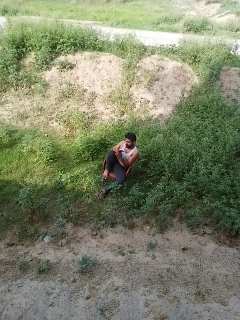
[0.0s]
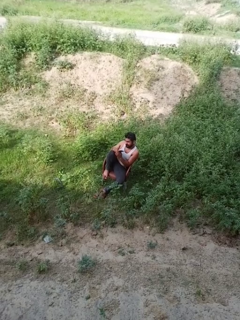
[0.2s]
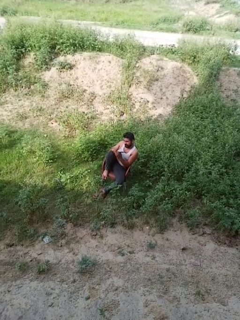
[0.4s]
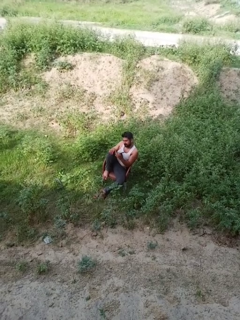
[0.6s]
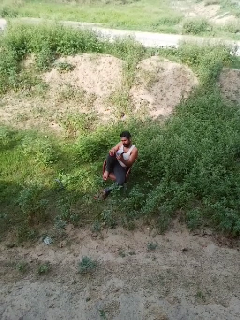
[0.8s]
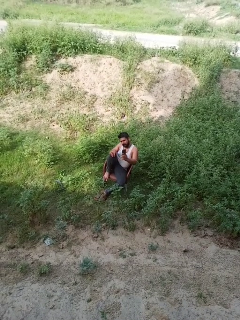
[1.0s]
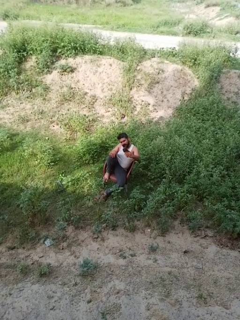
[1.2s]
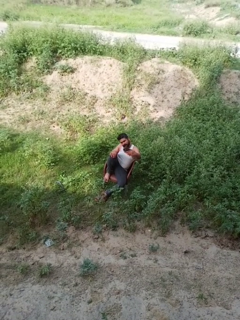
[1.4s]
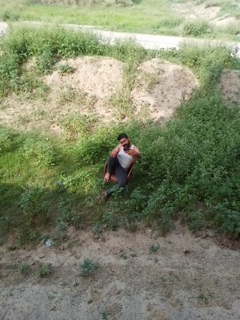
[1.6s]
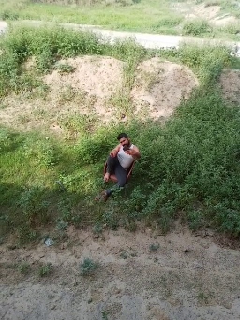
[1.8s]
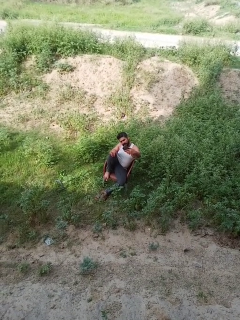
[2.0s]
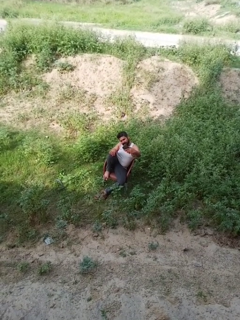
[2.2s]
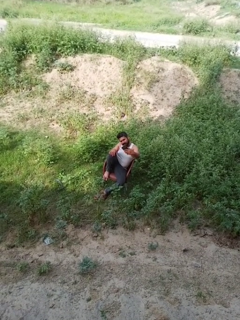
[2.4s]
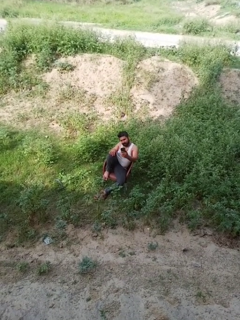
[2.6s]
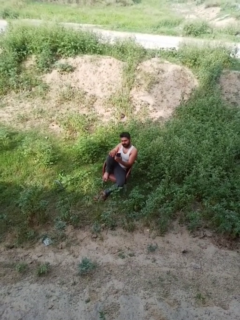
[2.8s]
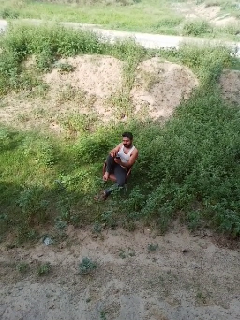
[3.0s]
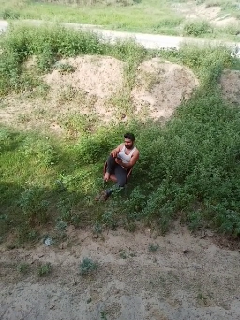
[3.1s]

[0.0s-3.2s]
person takes selfie

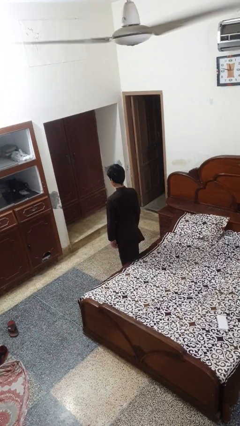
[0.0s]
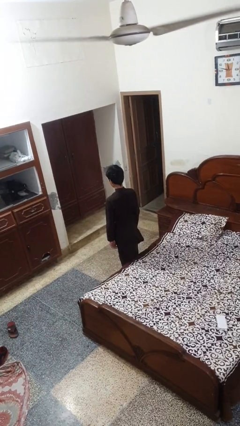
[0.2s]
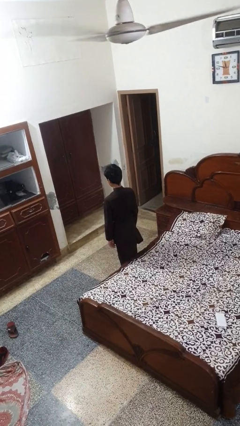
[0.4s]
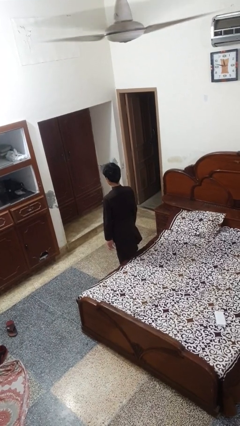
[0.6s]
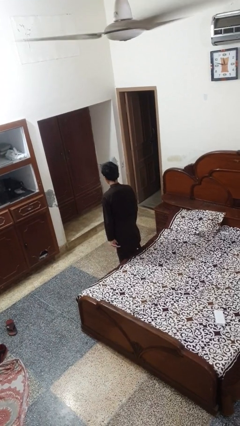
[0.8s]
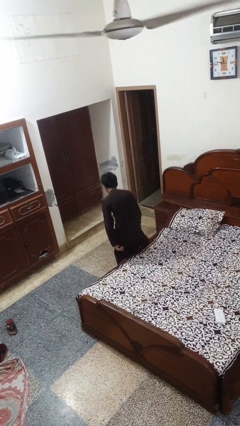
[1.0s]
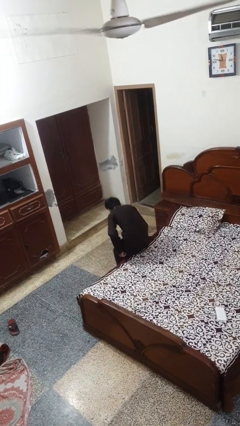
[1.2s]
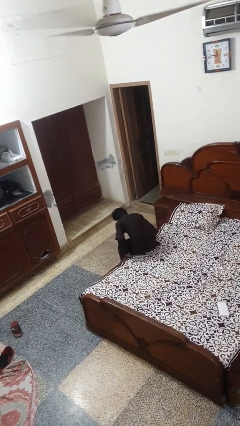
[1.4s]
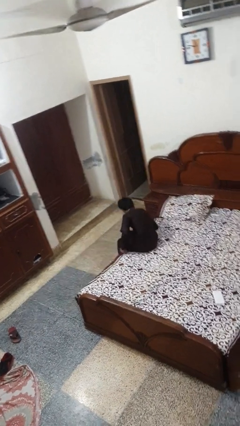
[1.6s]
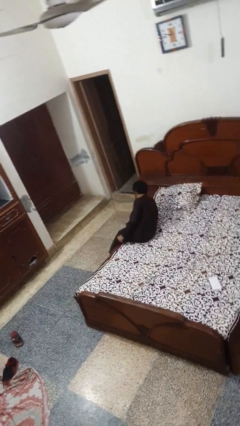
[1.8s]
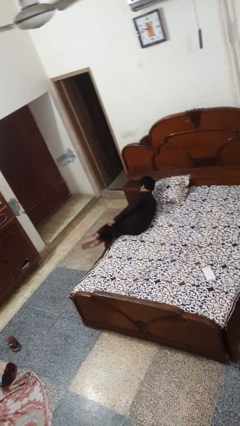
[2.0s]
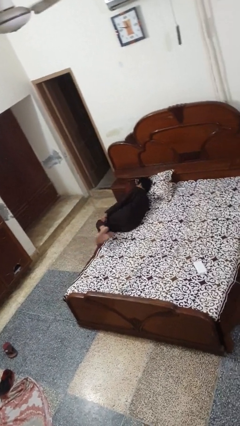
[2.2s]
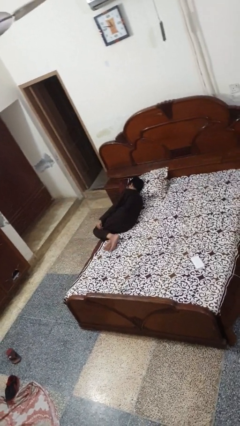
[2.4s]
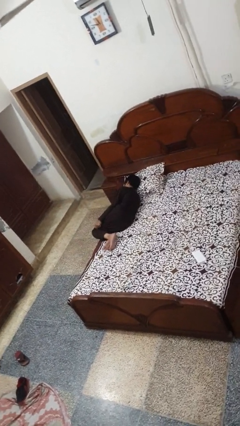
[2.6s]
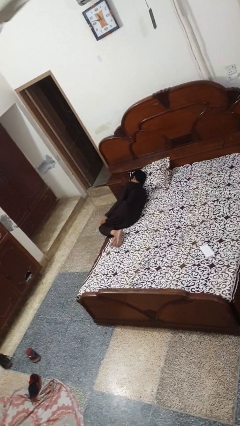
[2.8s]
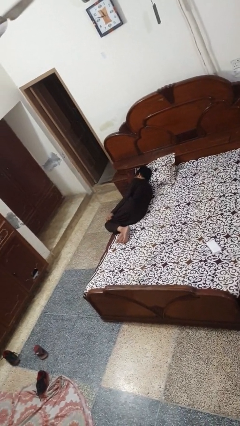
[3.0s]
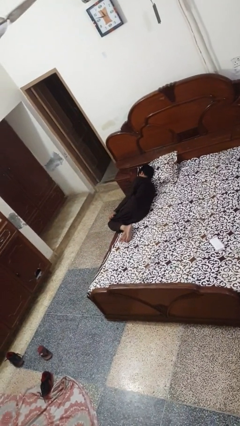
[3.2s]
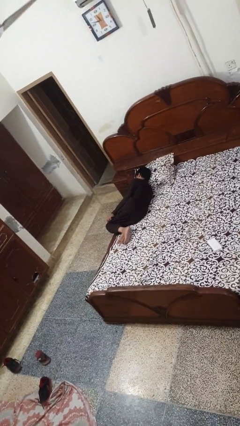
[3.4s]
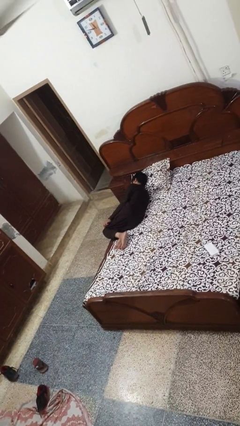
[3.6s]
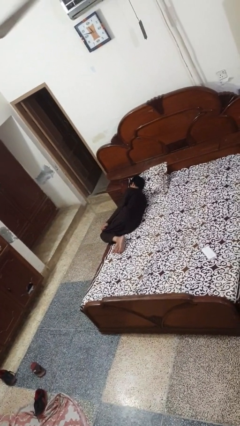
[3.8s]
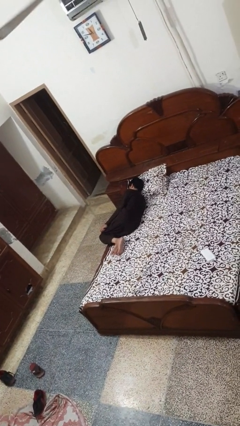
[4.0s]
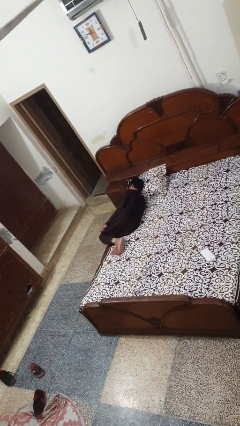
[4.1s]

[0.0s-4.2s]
person lies down on bed

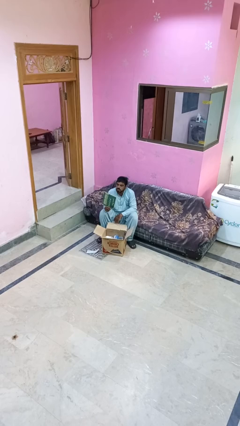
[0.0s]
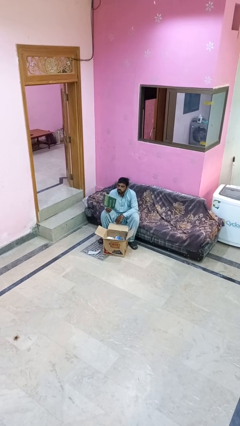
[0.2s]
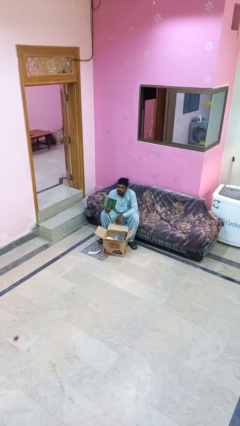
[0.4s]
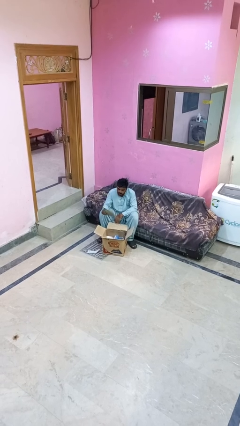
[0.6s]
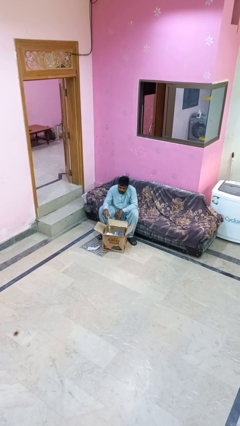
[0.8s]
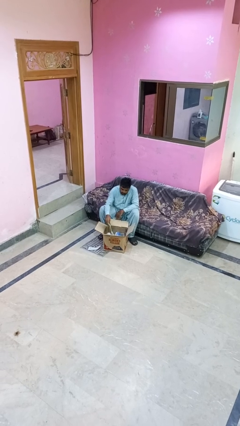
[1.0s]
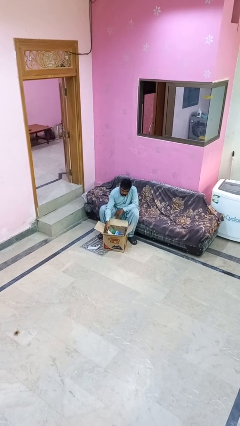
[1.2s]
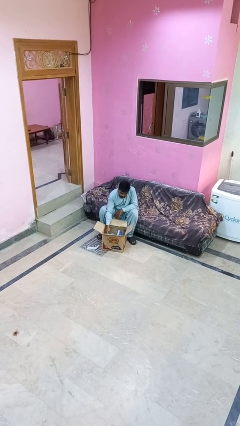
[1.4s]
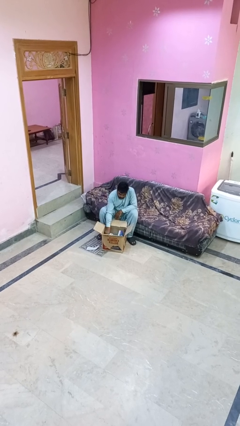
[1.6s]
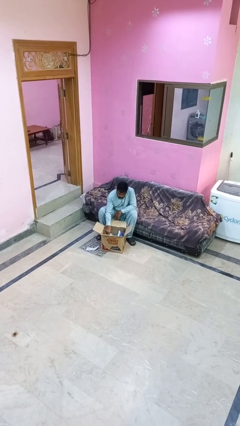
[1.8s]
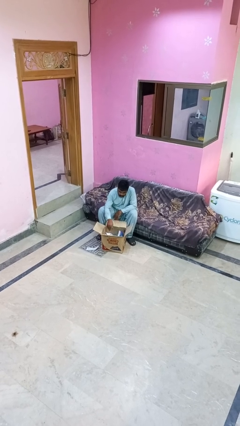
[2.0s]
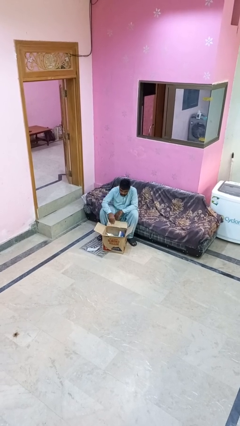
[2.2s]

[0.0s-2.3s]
person puts object into box

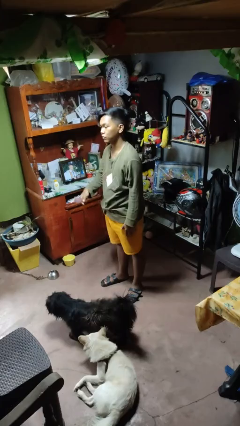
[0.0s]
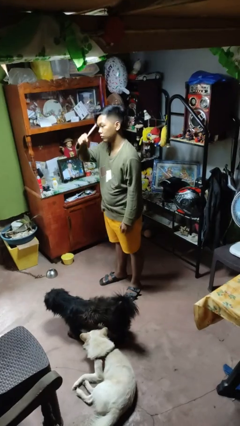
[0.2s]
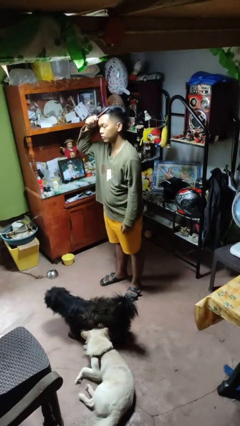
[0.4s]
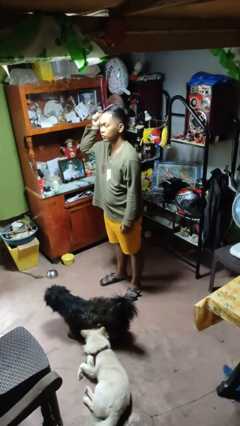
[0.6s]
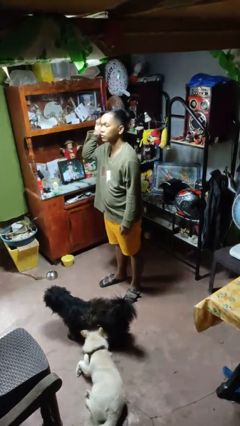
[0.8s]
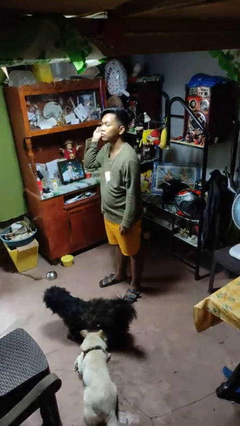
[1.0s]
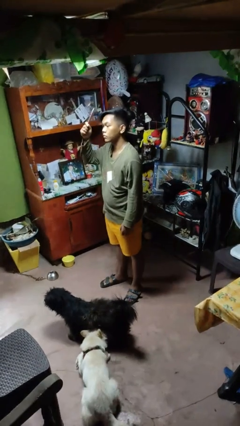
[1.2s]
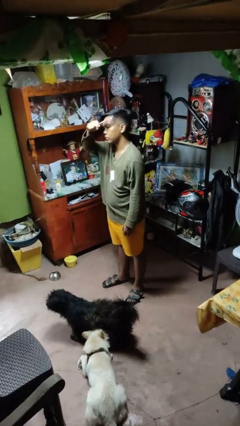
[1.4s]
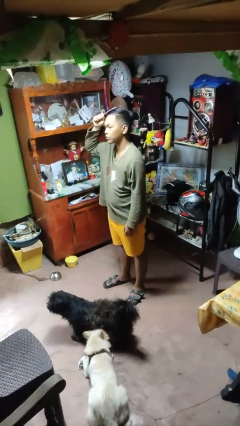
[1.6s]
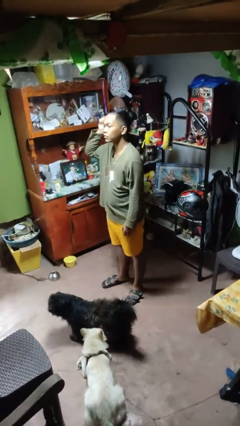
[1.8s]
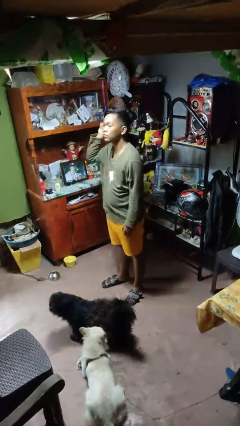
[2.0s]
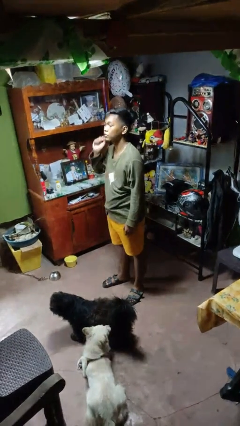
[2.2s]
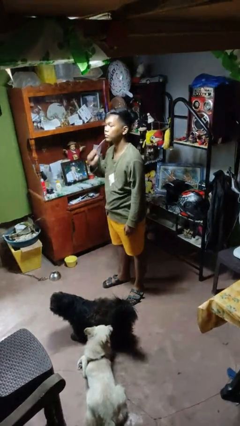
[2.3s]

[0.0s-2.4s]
person brushes hair

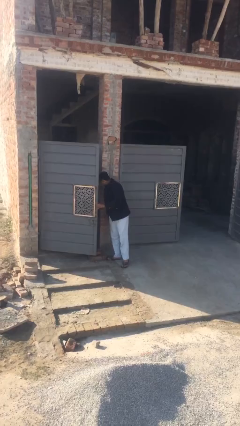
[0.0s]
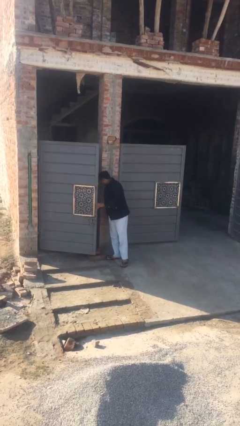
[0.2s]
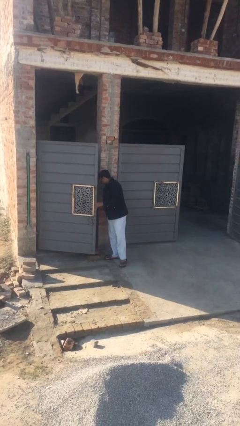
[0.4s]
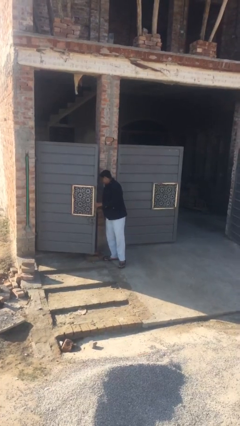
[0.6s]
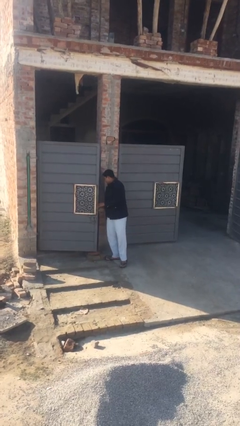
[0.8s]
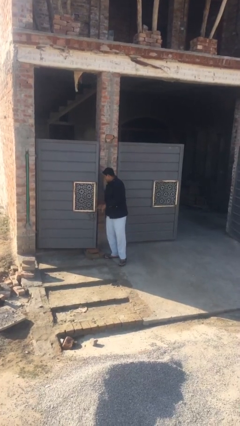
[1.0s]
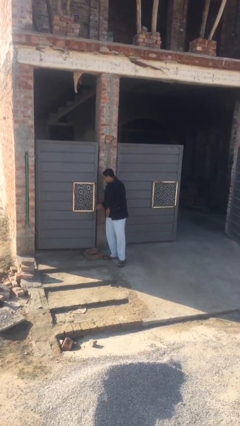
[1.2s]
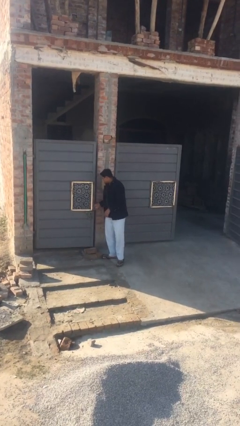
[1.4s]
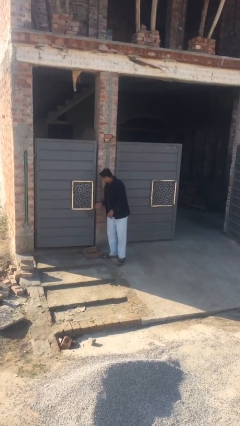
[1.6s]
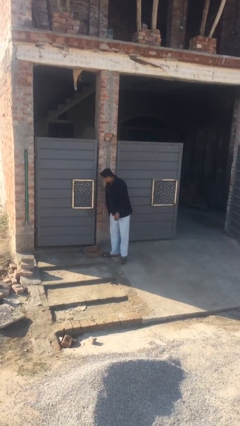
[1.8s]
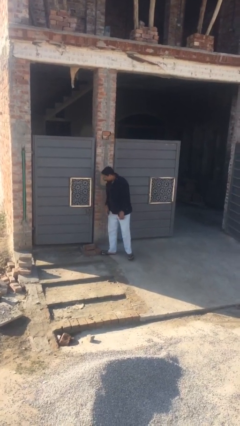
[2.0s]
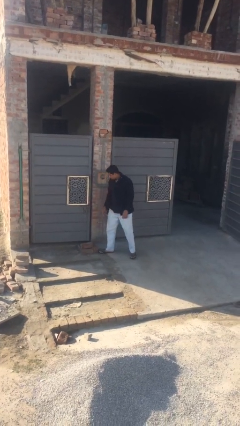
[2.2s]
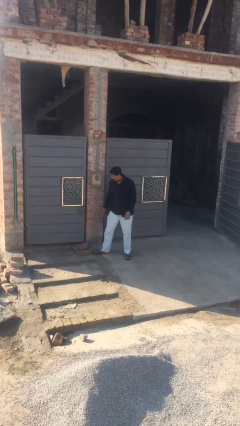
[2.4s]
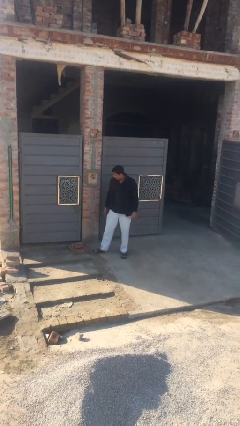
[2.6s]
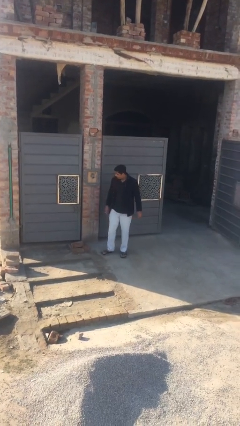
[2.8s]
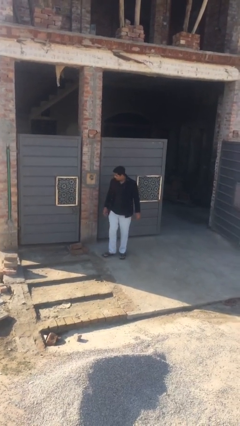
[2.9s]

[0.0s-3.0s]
person closes facility door

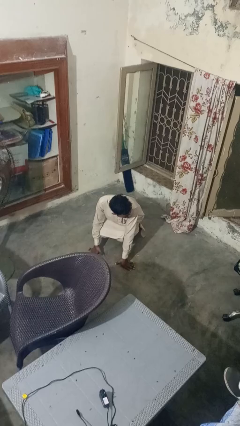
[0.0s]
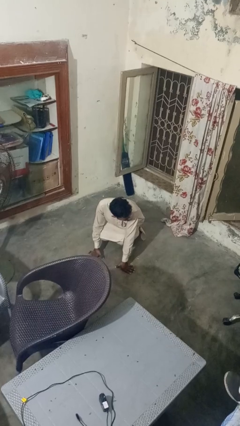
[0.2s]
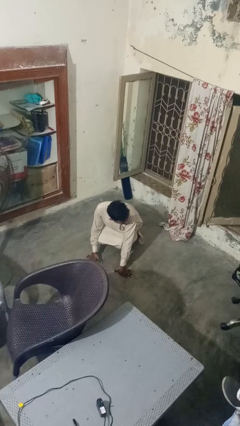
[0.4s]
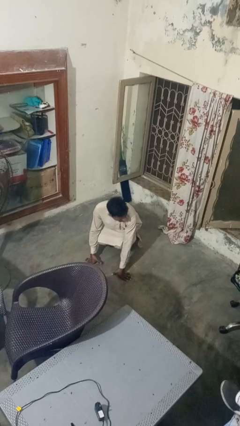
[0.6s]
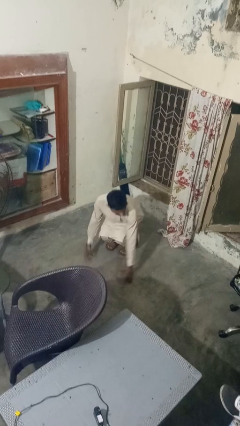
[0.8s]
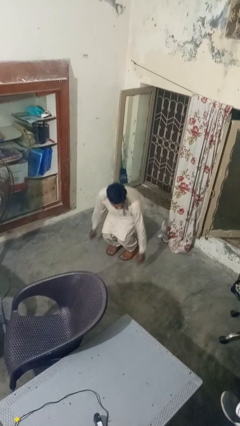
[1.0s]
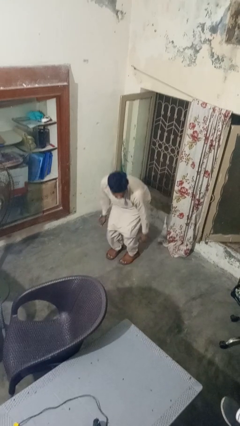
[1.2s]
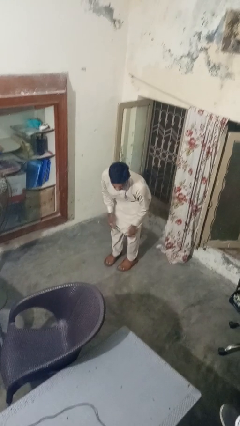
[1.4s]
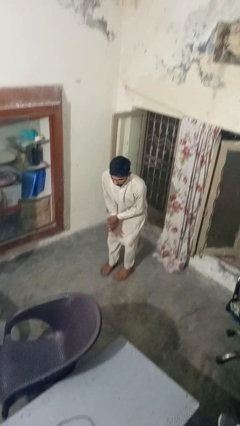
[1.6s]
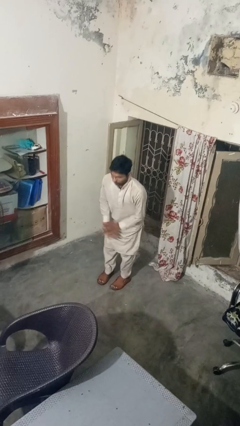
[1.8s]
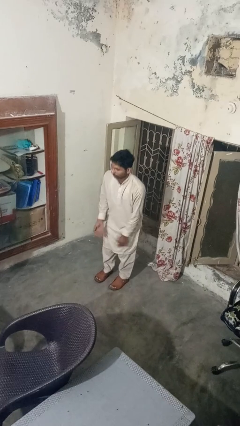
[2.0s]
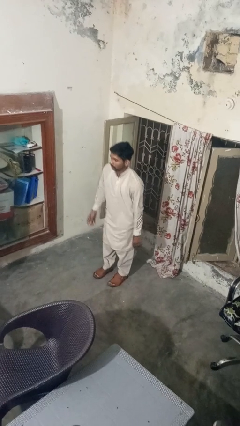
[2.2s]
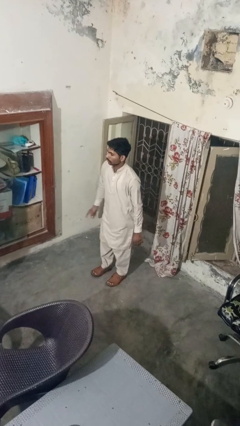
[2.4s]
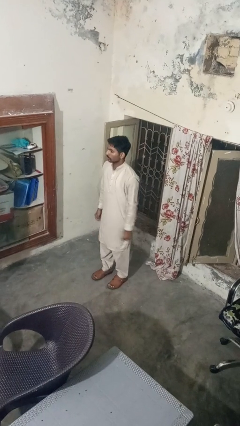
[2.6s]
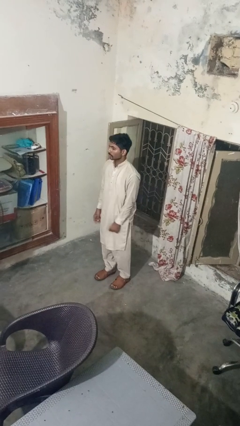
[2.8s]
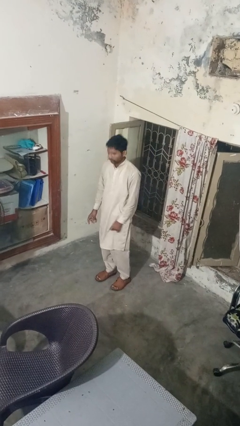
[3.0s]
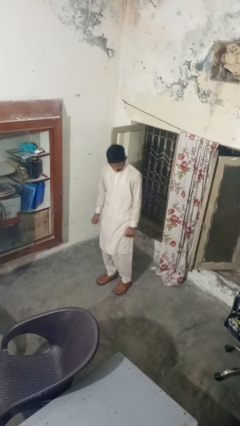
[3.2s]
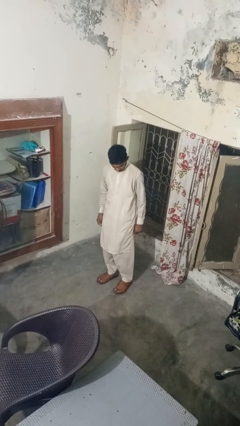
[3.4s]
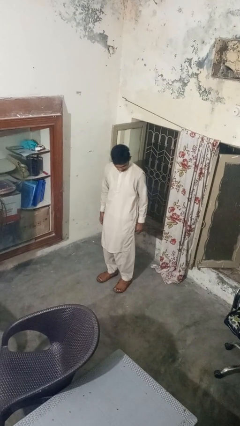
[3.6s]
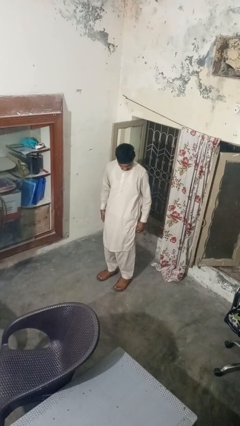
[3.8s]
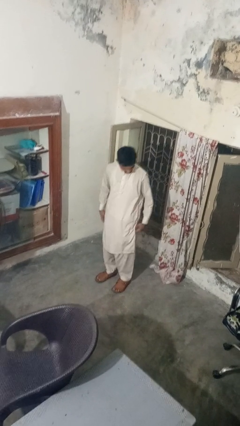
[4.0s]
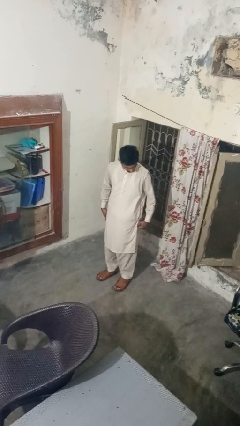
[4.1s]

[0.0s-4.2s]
person stands up from floor
